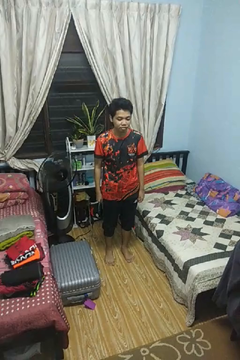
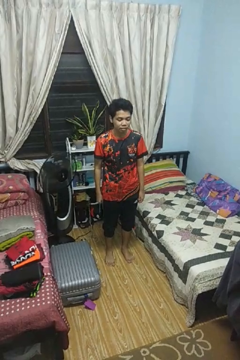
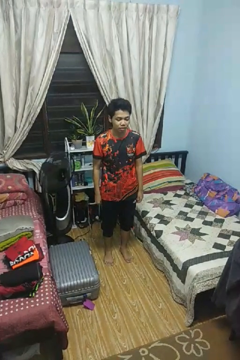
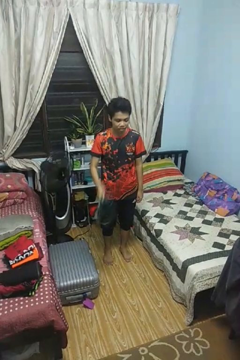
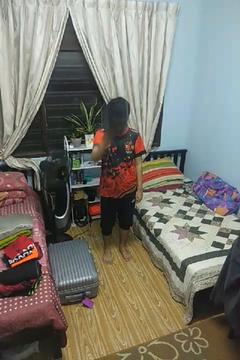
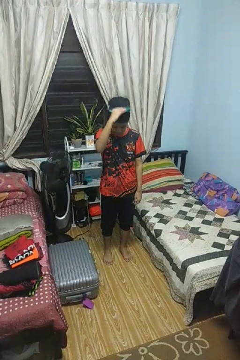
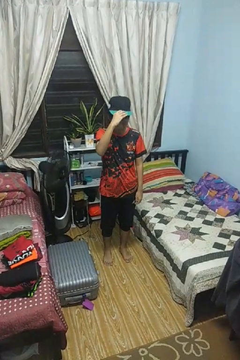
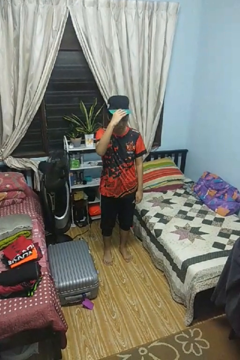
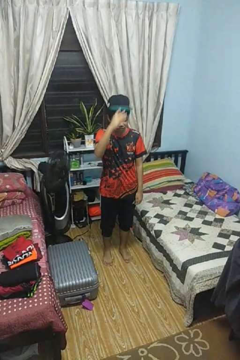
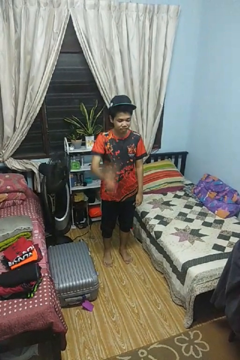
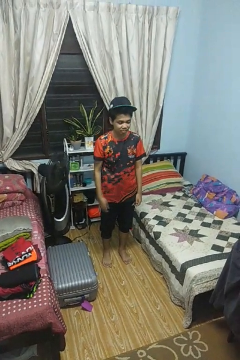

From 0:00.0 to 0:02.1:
person puts on hat

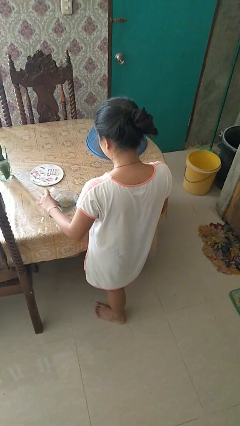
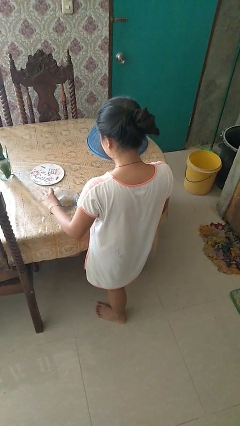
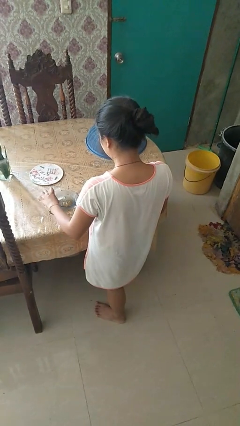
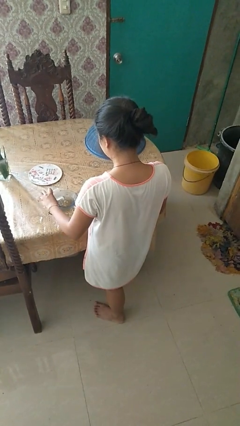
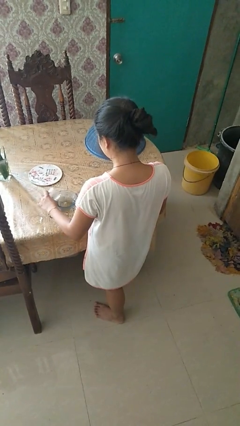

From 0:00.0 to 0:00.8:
person pours into bowl

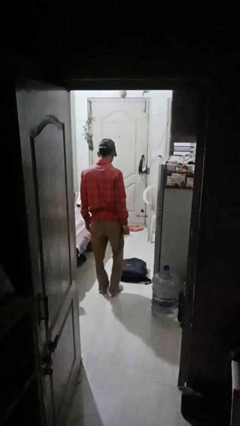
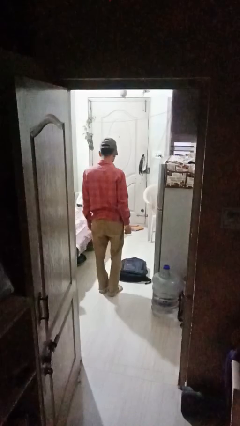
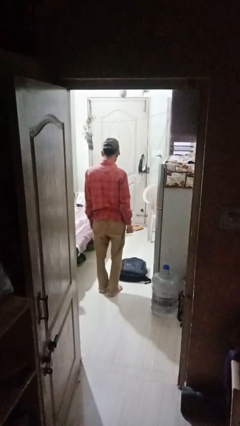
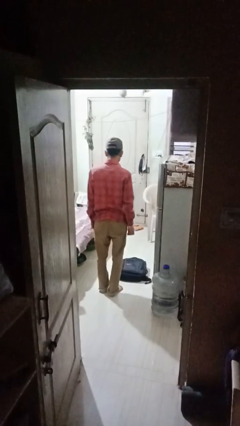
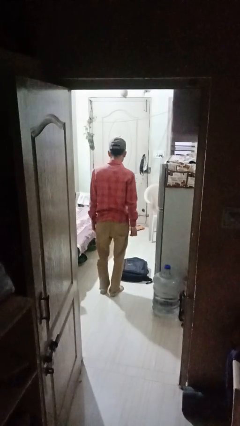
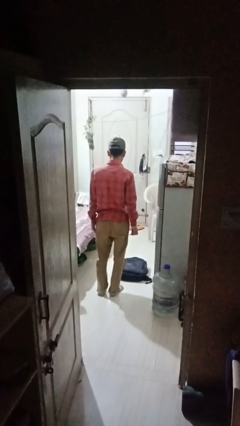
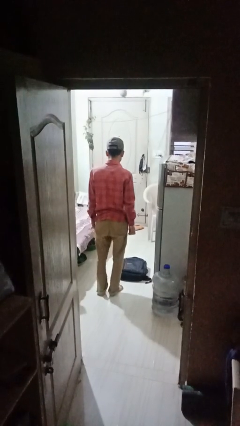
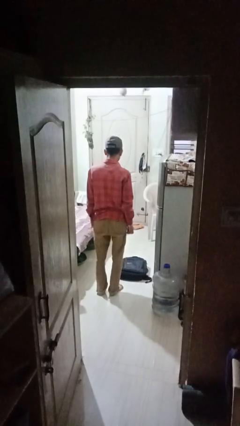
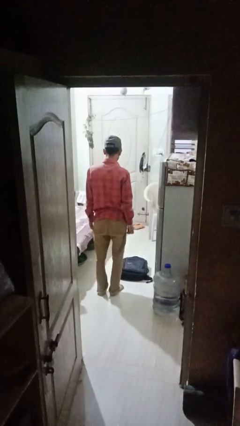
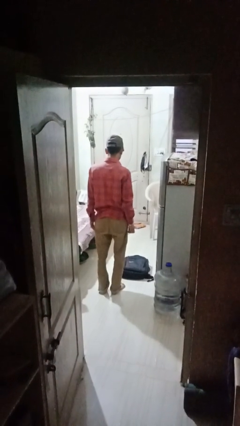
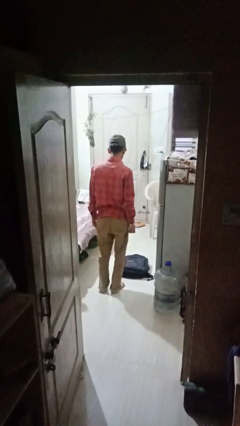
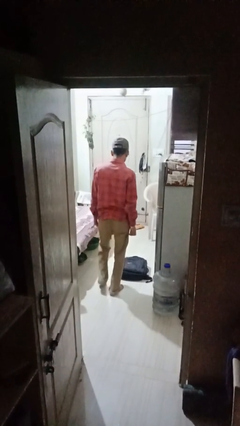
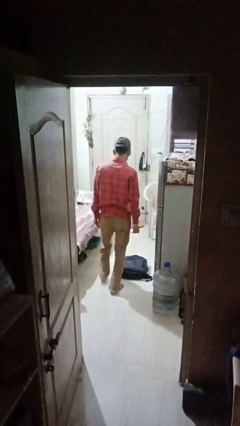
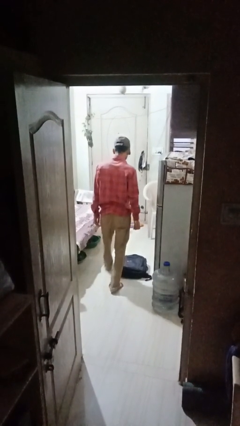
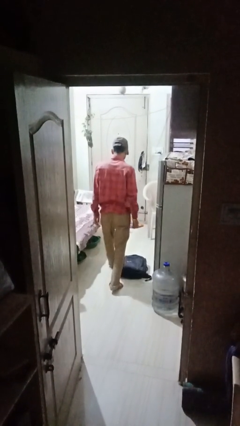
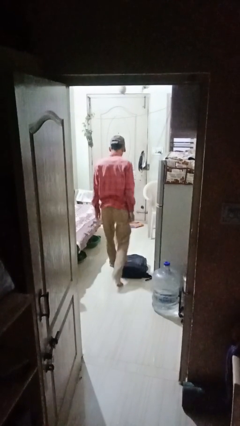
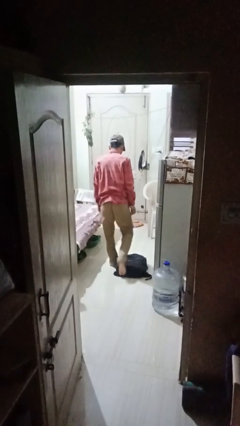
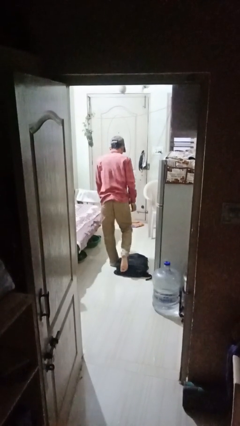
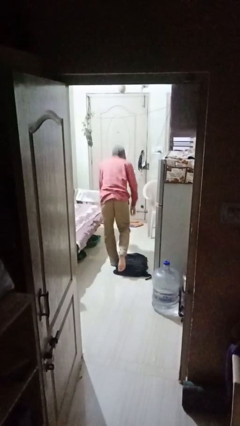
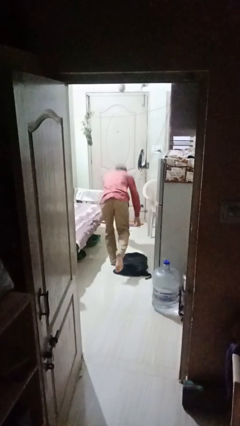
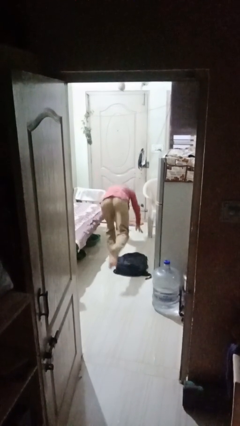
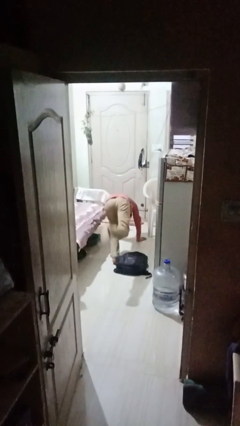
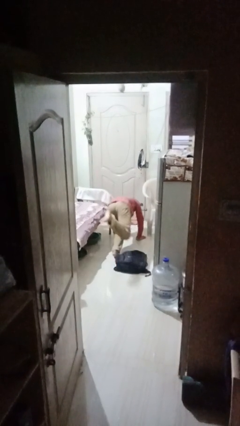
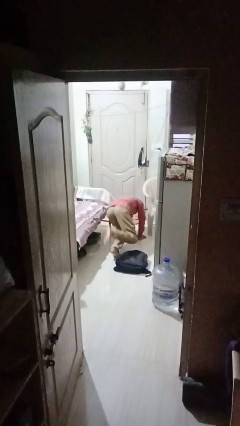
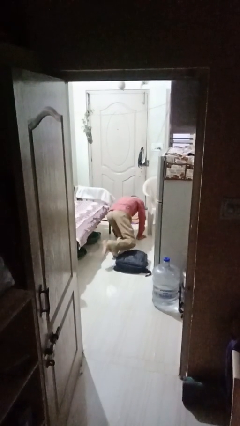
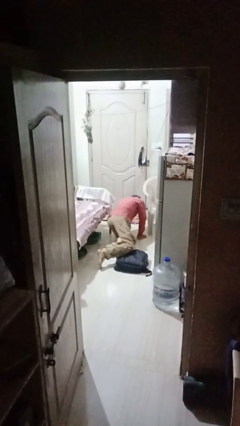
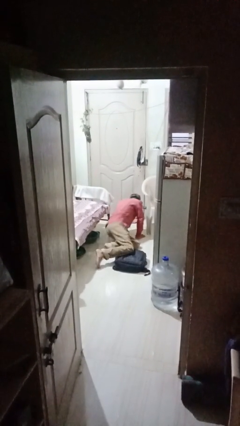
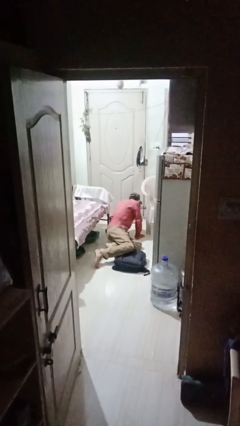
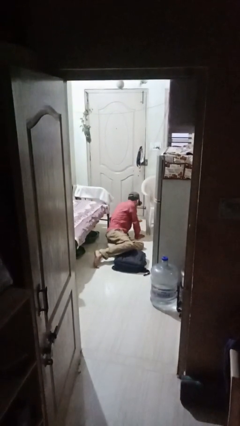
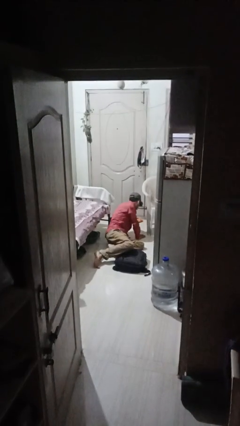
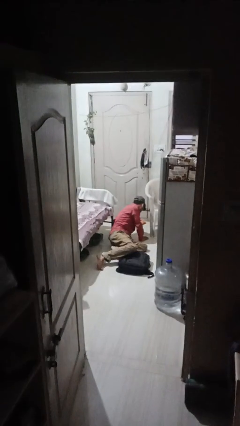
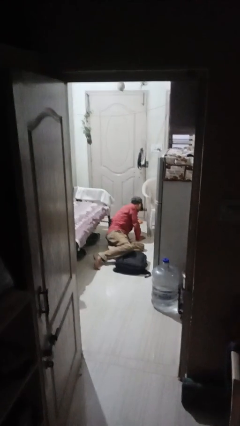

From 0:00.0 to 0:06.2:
person trips on object on floor

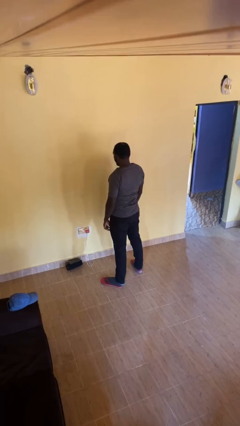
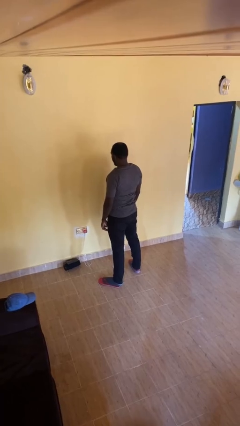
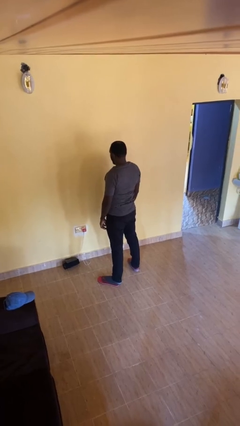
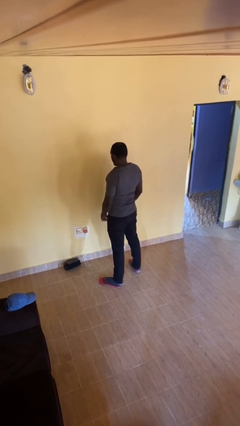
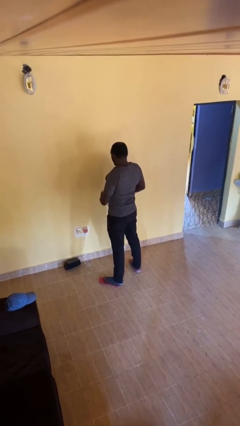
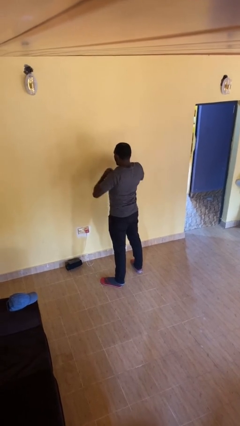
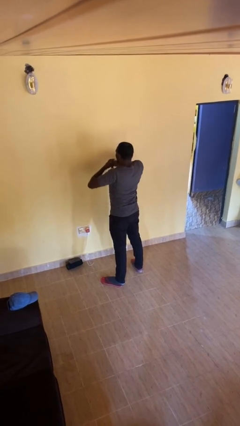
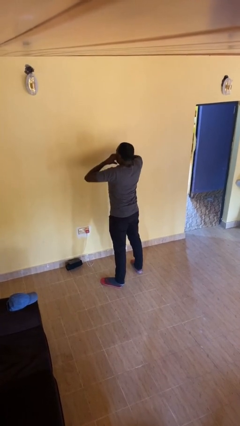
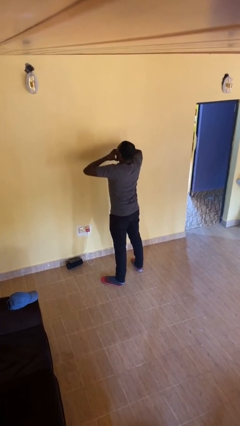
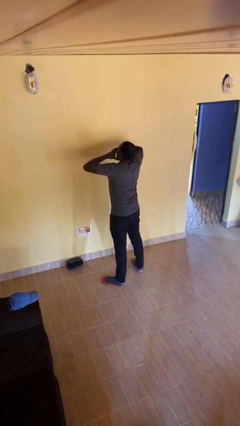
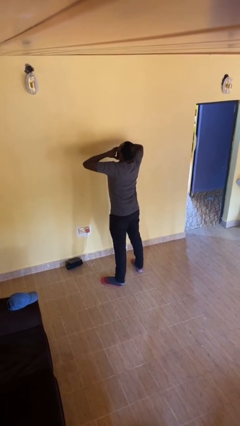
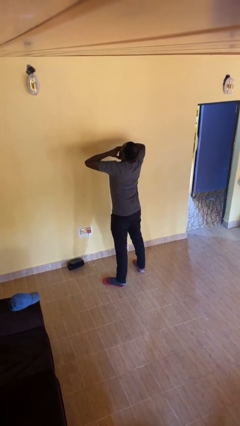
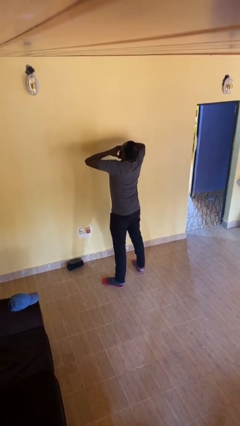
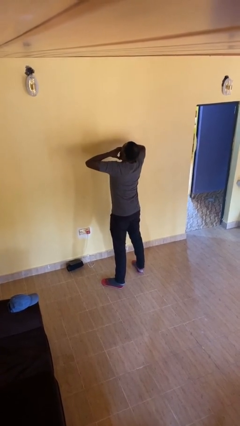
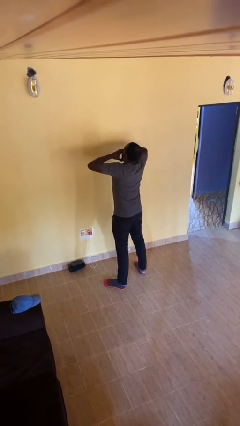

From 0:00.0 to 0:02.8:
person yawns

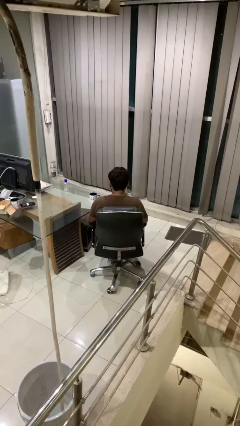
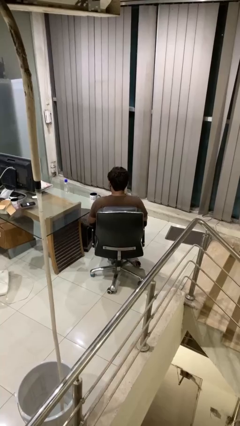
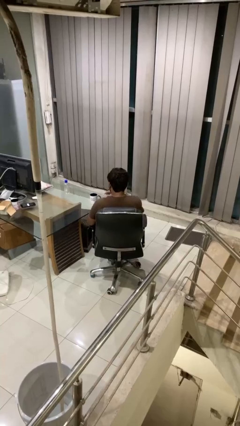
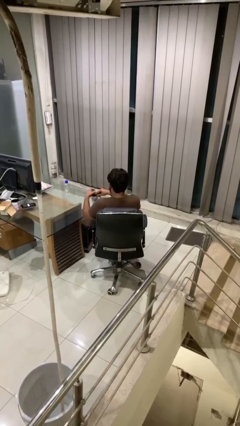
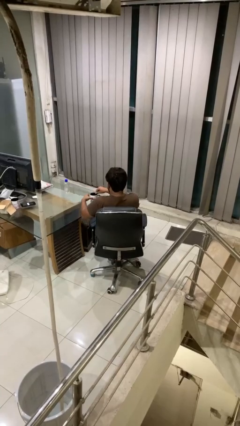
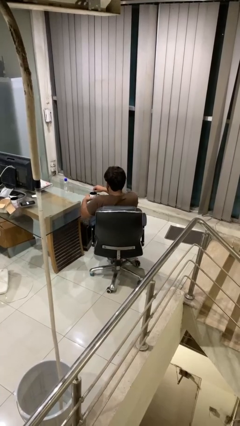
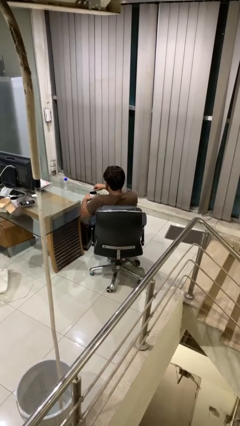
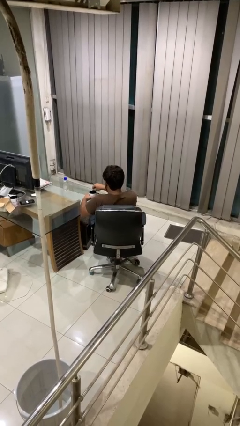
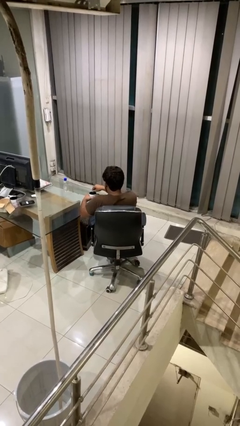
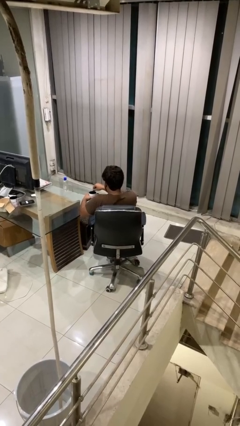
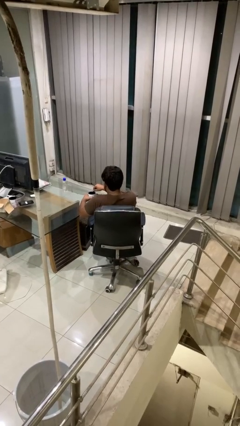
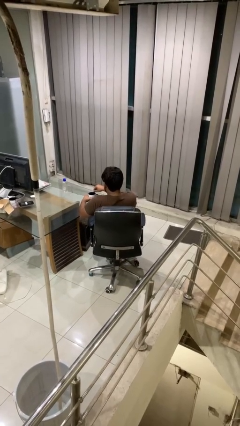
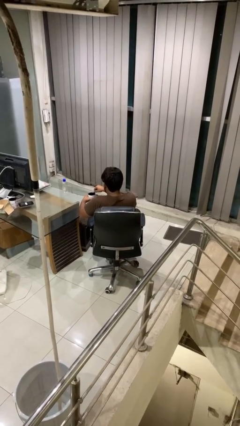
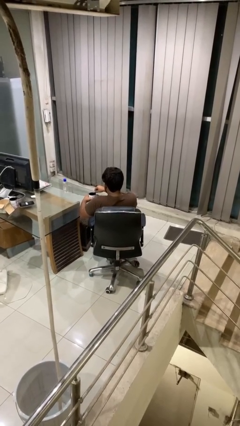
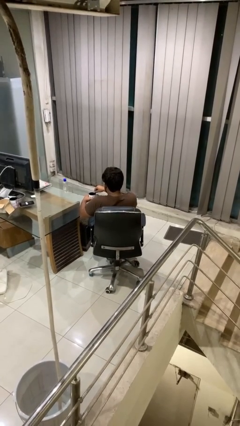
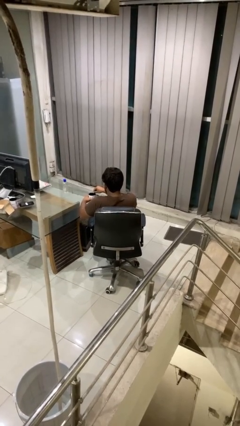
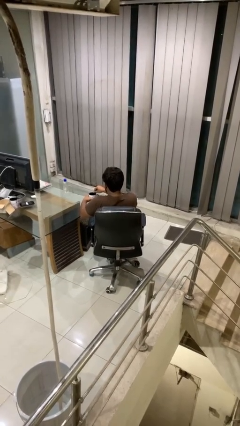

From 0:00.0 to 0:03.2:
person stirs mug

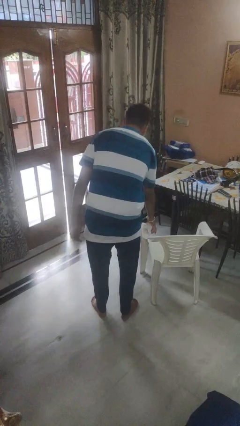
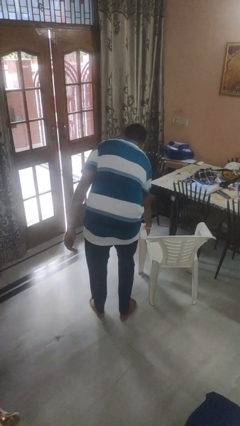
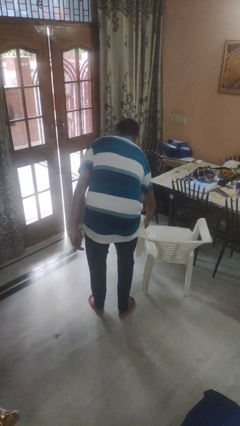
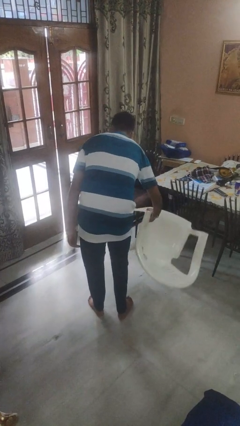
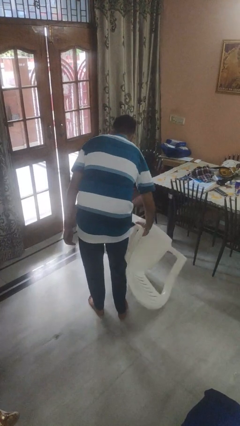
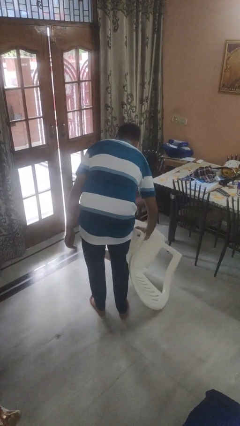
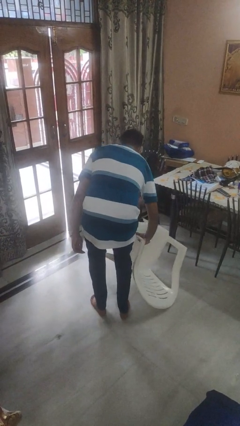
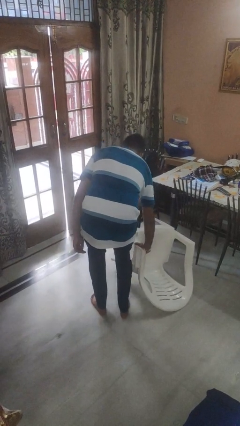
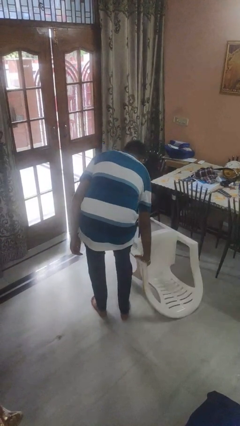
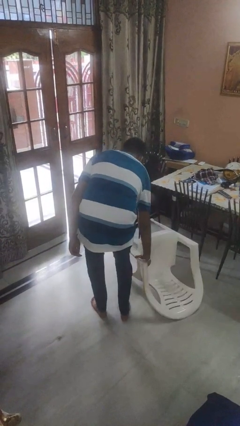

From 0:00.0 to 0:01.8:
person knocks over furniture

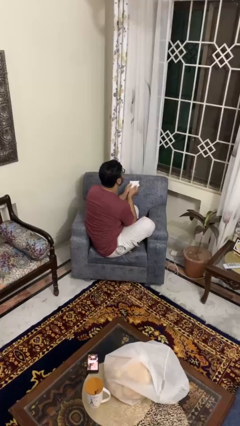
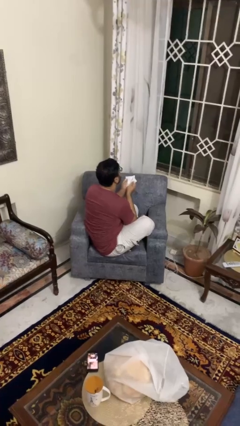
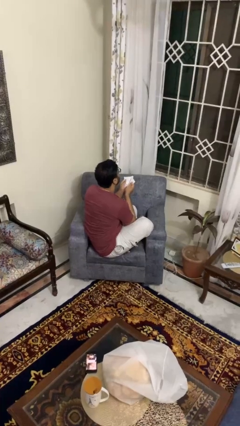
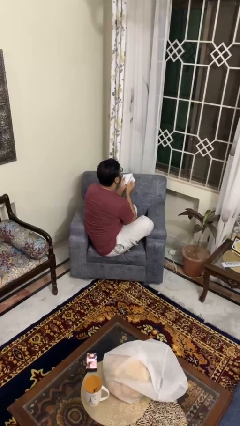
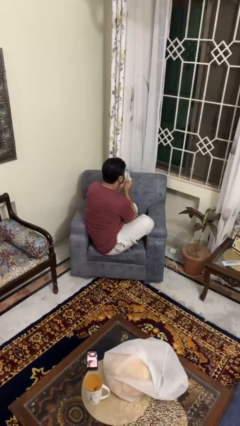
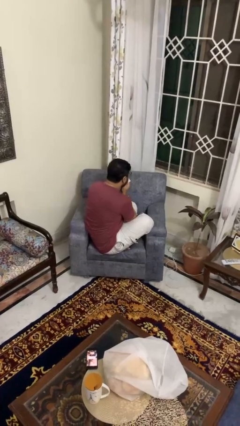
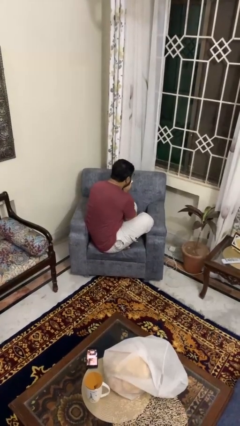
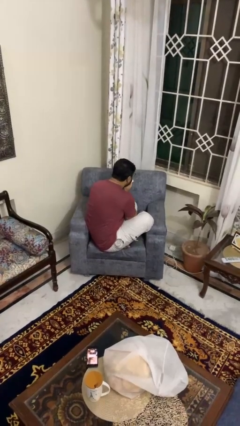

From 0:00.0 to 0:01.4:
person blows nose
